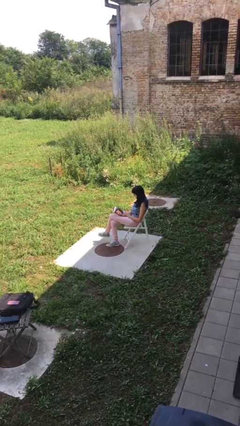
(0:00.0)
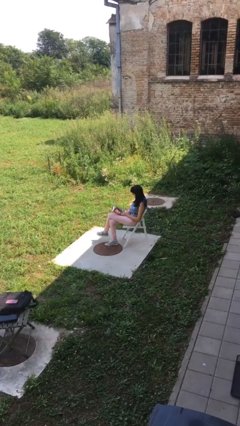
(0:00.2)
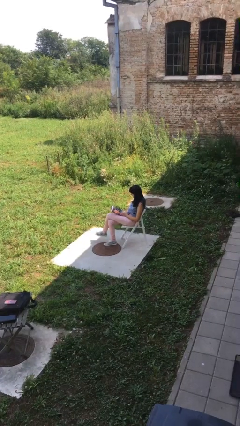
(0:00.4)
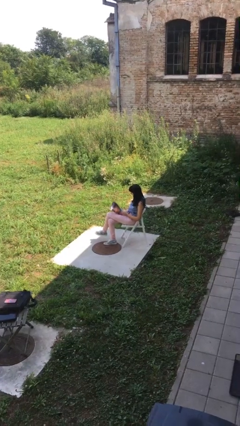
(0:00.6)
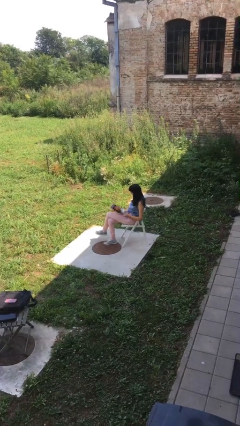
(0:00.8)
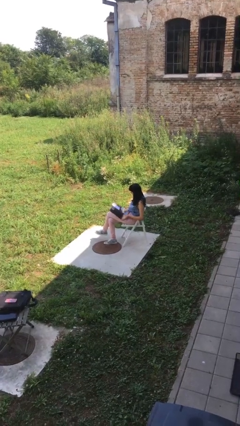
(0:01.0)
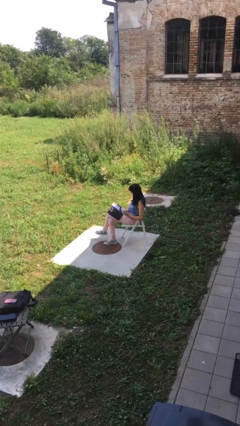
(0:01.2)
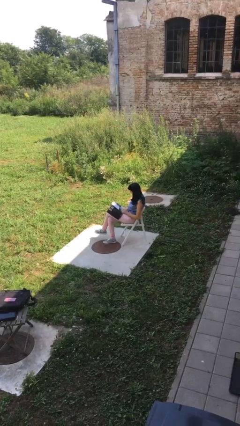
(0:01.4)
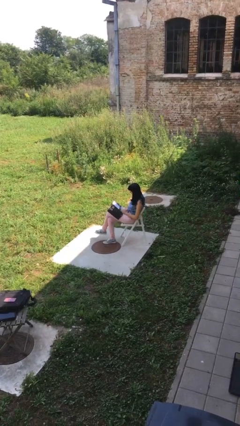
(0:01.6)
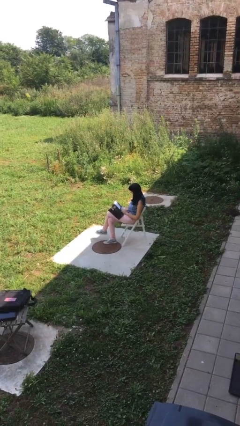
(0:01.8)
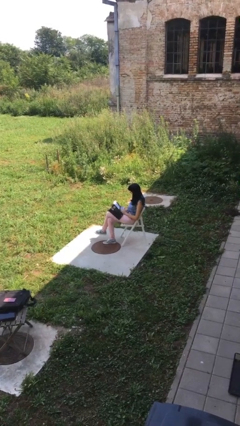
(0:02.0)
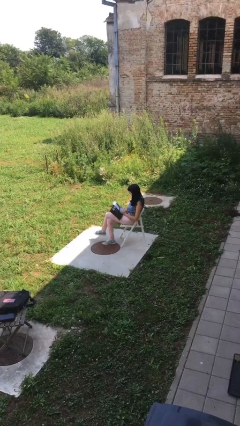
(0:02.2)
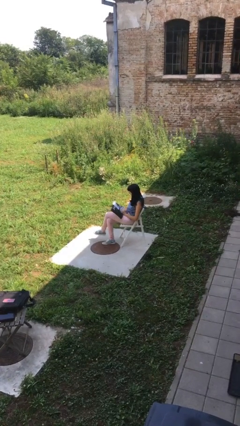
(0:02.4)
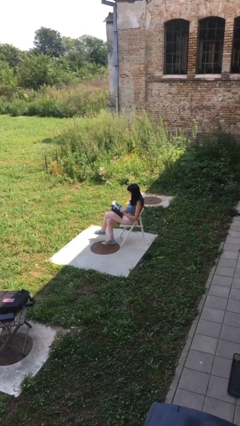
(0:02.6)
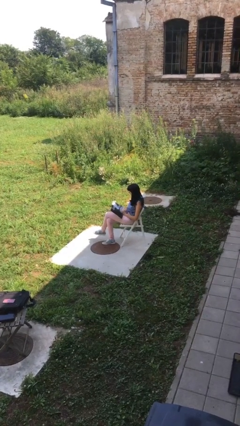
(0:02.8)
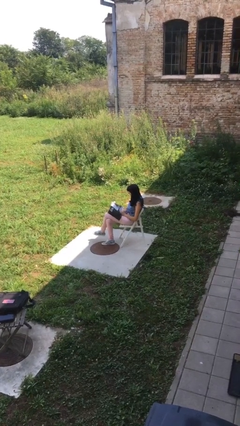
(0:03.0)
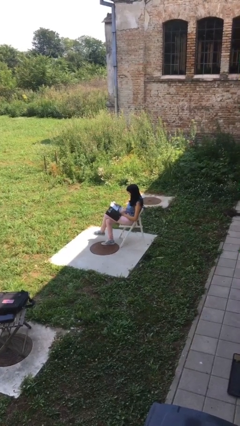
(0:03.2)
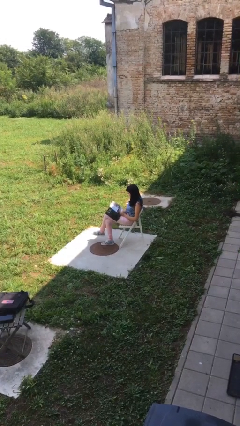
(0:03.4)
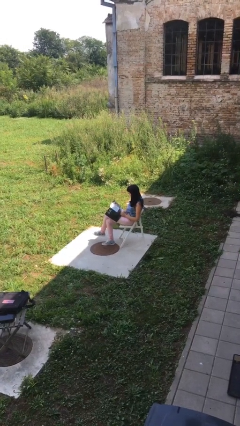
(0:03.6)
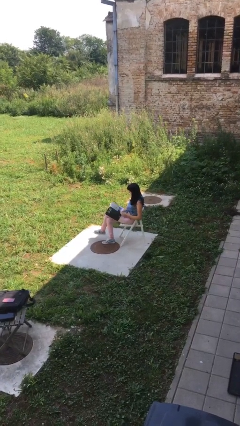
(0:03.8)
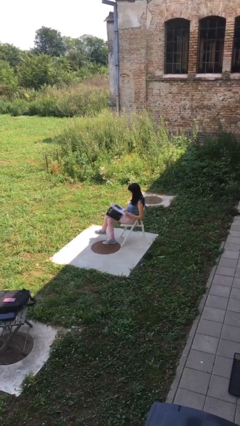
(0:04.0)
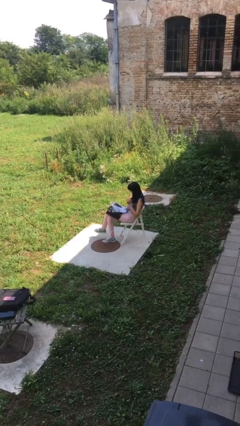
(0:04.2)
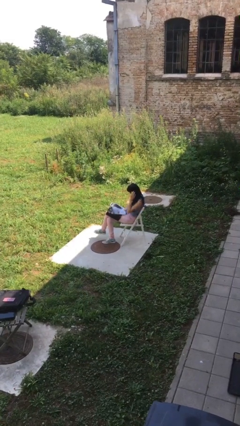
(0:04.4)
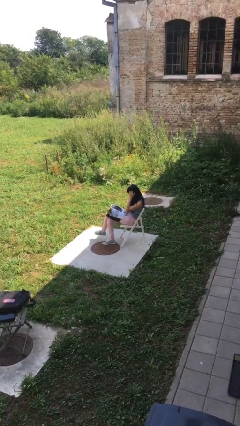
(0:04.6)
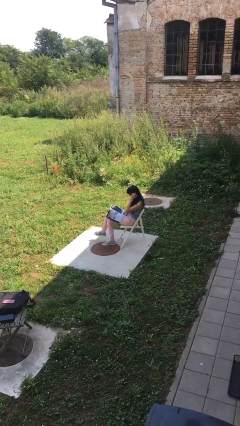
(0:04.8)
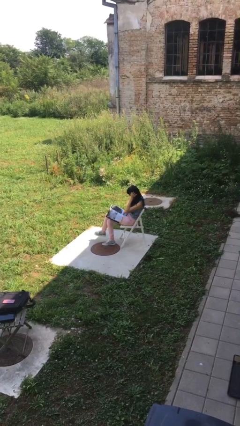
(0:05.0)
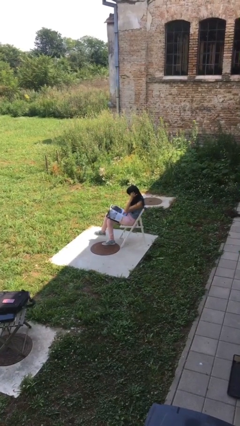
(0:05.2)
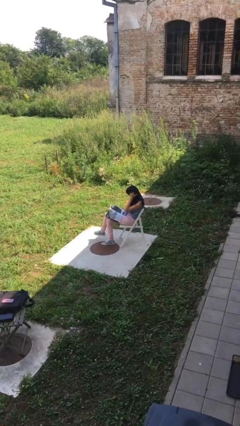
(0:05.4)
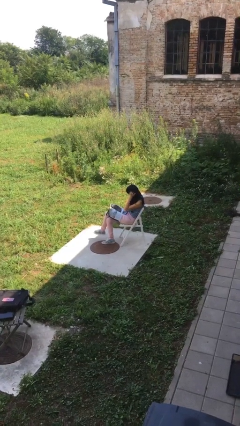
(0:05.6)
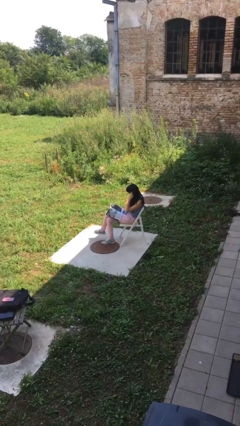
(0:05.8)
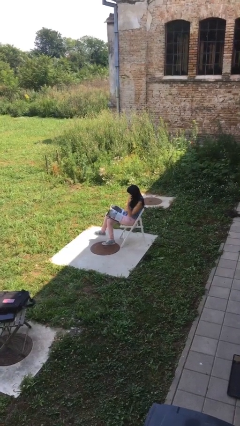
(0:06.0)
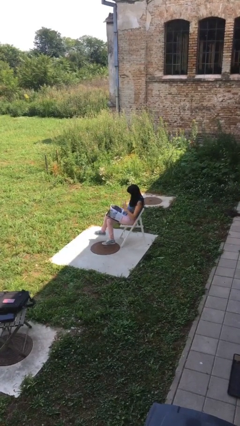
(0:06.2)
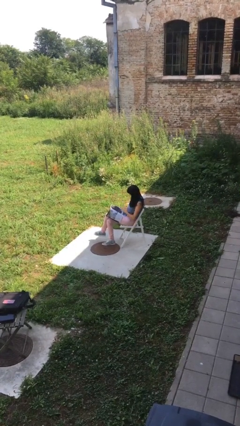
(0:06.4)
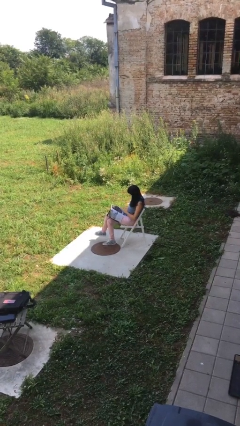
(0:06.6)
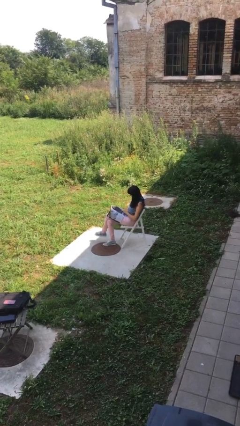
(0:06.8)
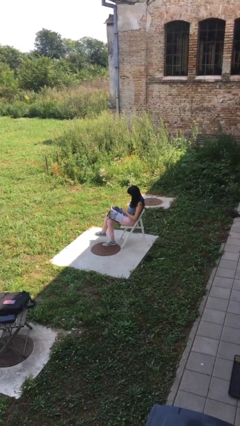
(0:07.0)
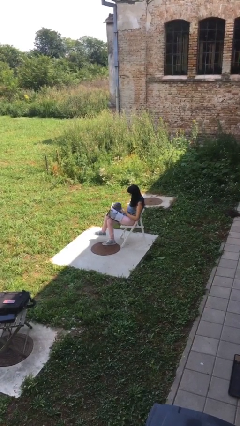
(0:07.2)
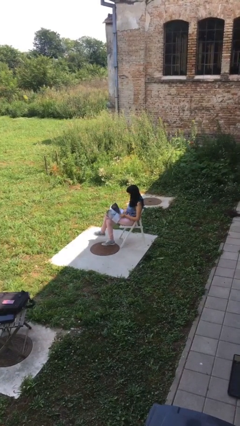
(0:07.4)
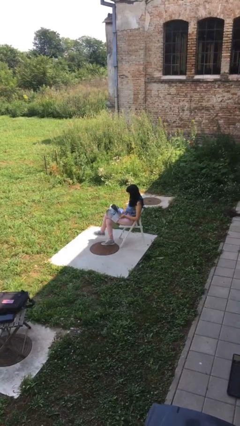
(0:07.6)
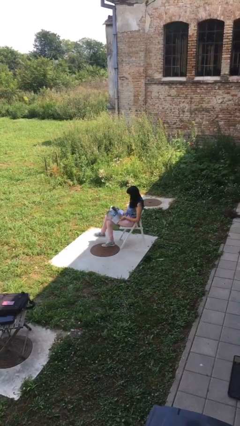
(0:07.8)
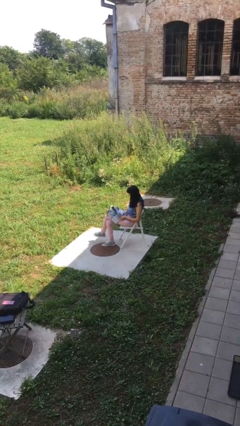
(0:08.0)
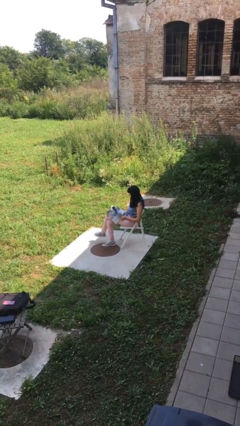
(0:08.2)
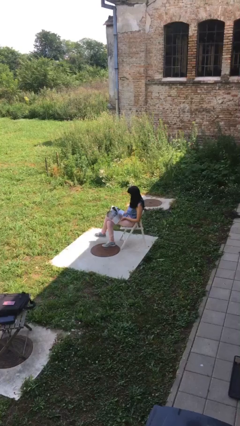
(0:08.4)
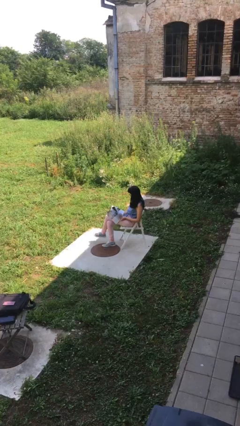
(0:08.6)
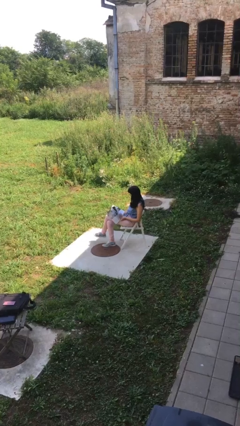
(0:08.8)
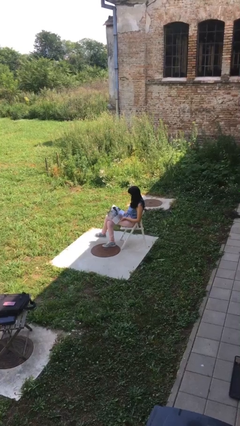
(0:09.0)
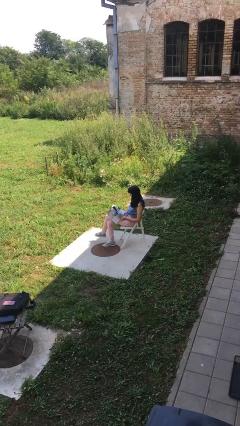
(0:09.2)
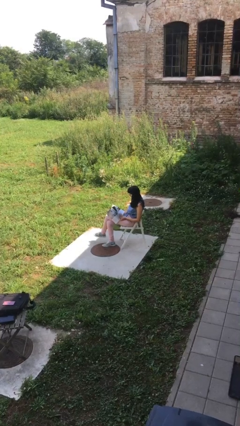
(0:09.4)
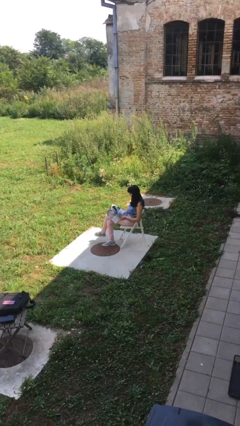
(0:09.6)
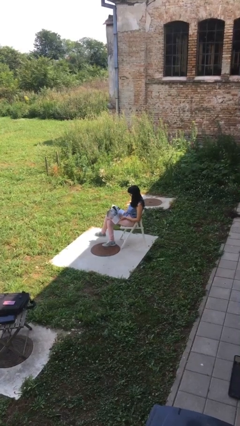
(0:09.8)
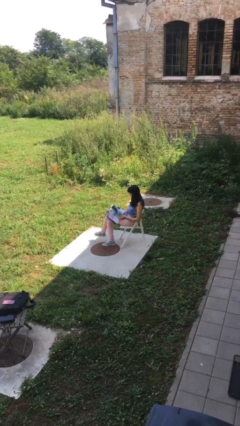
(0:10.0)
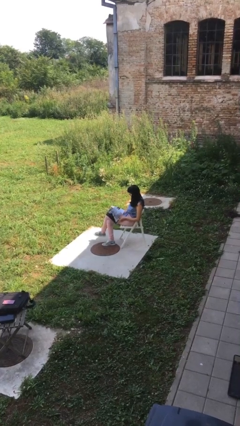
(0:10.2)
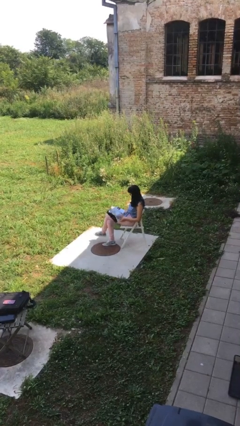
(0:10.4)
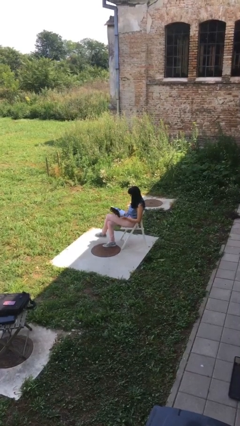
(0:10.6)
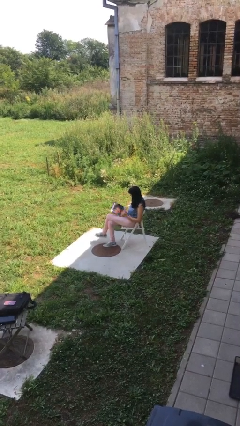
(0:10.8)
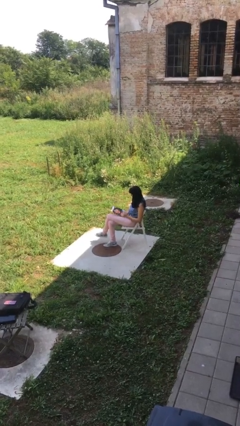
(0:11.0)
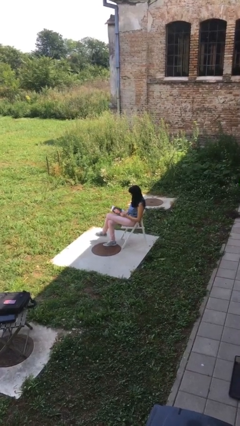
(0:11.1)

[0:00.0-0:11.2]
person reads document

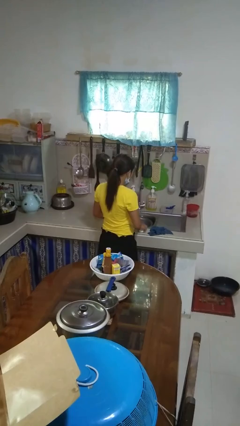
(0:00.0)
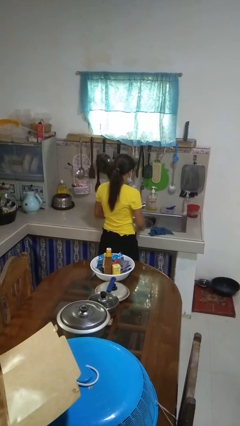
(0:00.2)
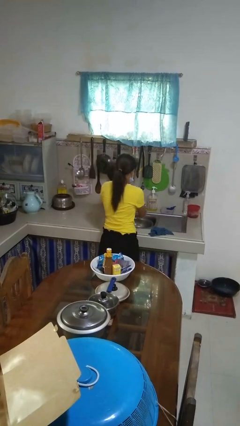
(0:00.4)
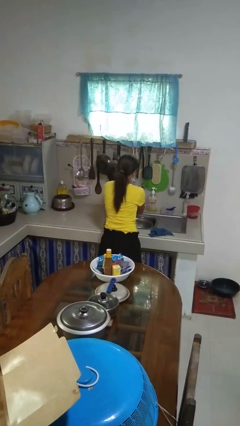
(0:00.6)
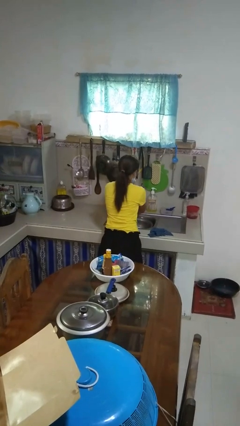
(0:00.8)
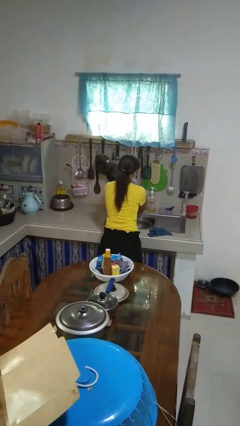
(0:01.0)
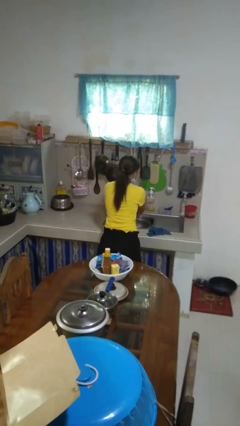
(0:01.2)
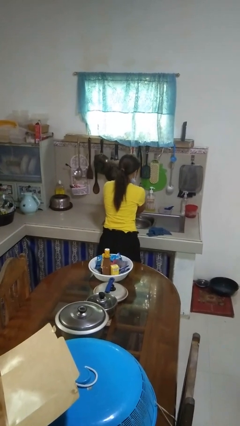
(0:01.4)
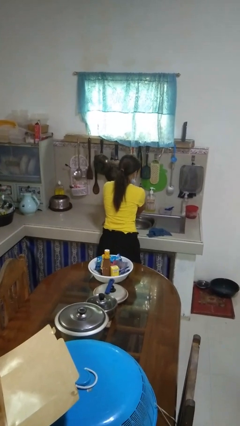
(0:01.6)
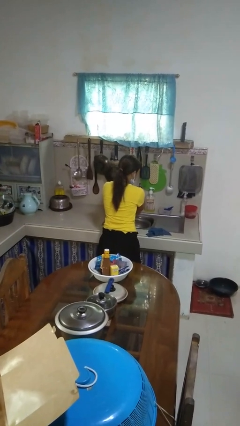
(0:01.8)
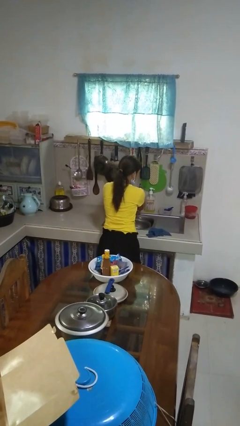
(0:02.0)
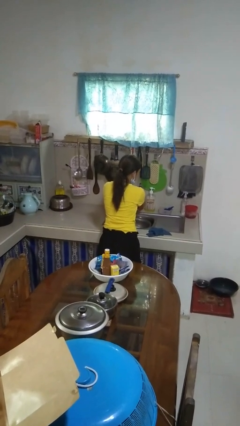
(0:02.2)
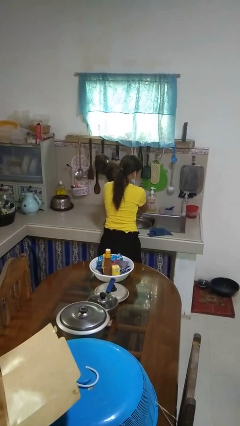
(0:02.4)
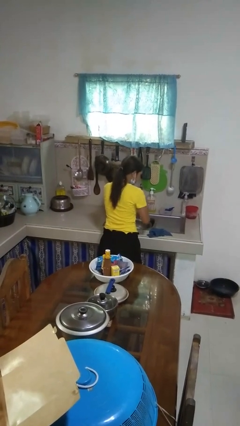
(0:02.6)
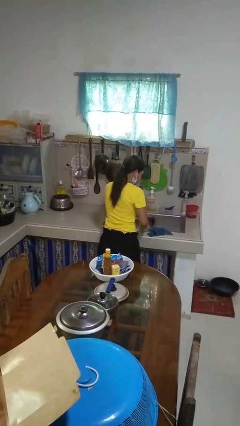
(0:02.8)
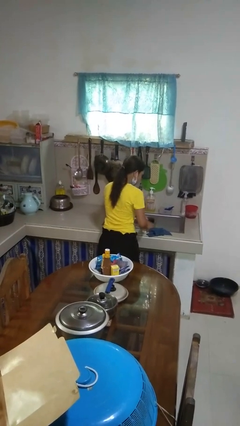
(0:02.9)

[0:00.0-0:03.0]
person washes hands

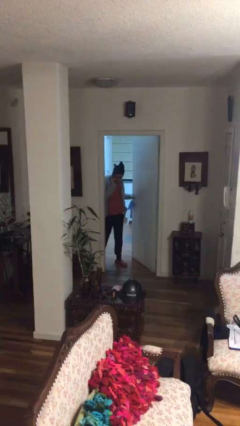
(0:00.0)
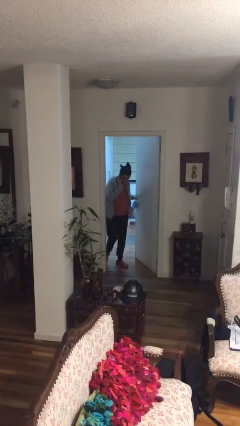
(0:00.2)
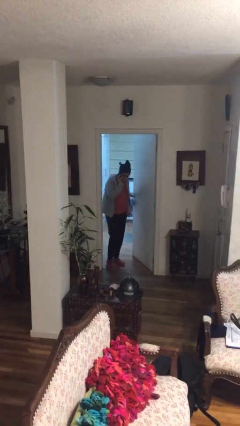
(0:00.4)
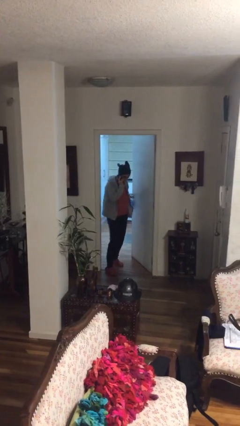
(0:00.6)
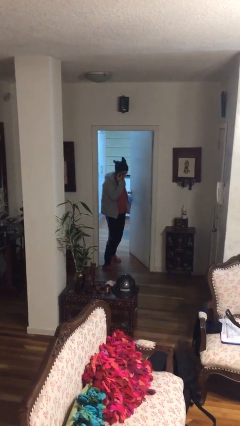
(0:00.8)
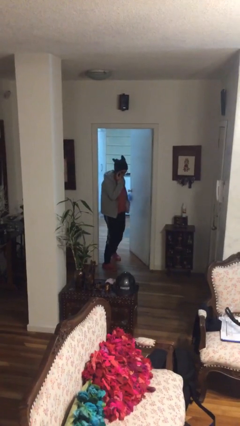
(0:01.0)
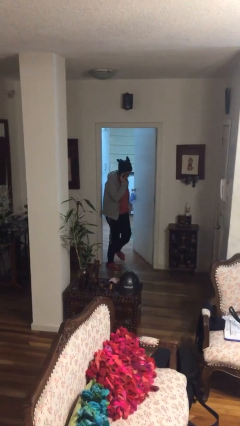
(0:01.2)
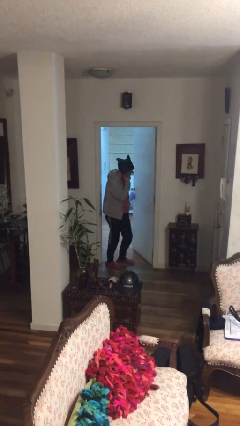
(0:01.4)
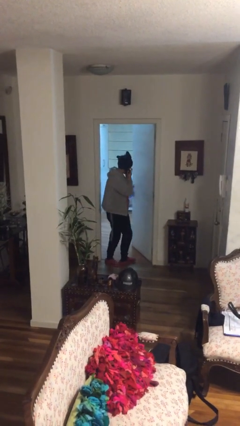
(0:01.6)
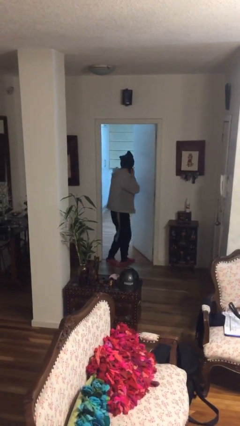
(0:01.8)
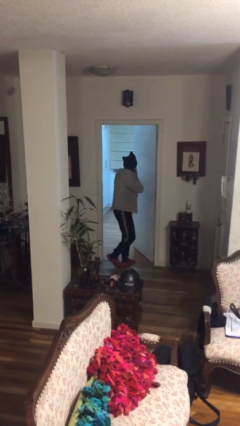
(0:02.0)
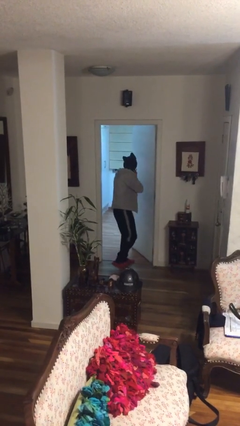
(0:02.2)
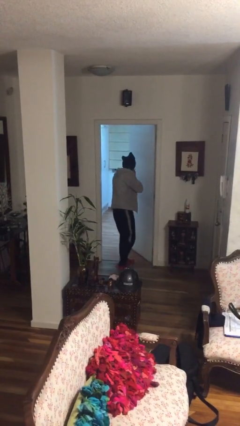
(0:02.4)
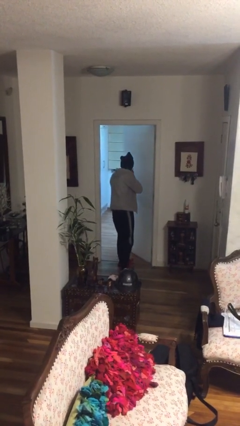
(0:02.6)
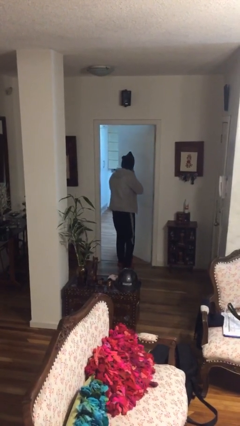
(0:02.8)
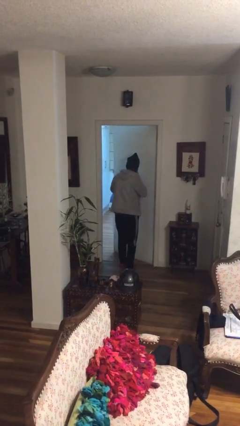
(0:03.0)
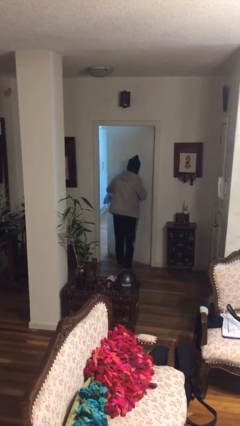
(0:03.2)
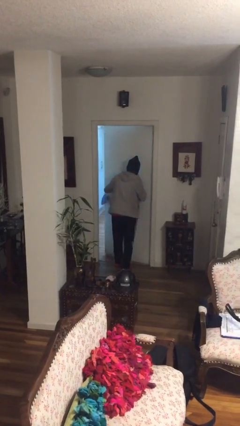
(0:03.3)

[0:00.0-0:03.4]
person enters scene through structure

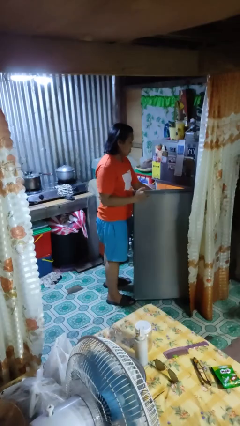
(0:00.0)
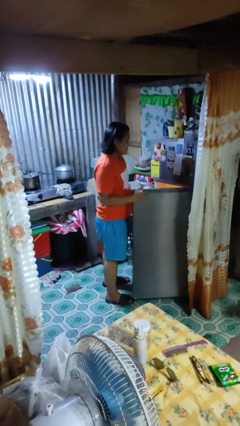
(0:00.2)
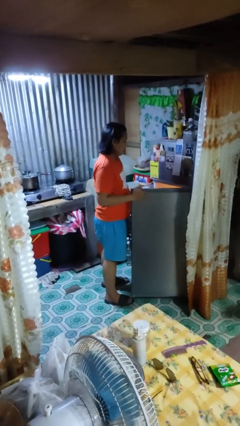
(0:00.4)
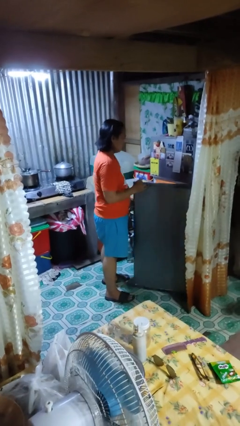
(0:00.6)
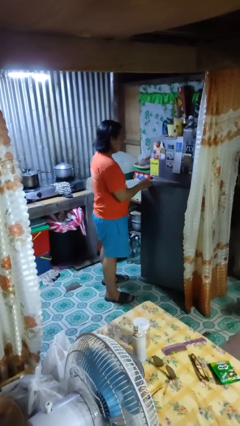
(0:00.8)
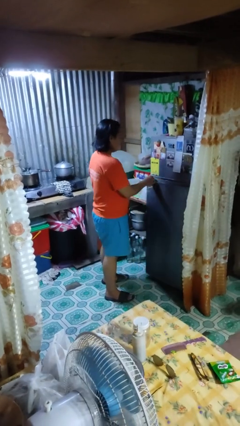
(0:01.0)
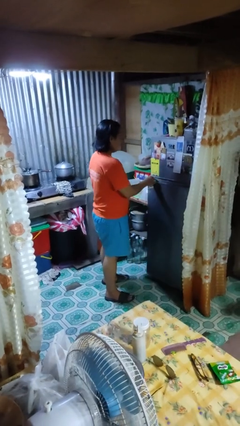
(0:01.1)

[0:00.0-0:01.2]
person closes refrigerator
